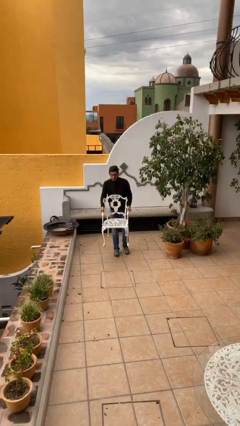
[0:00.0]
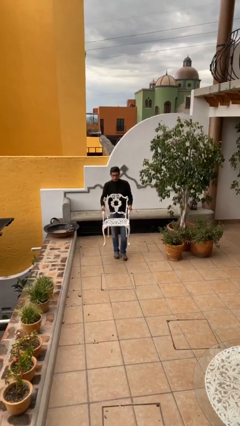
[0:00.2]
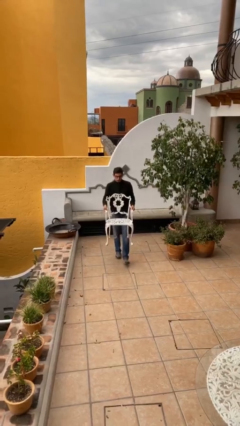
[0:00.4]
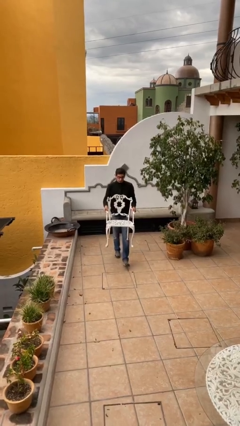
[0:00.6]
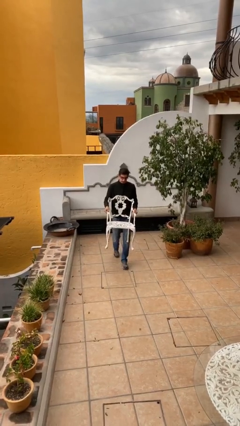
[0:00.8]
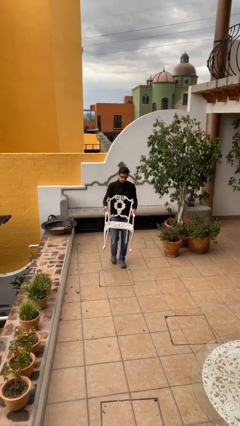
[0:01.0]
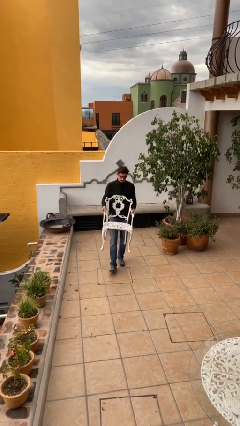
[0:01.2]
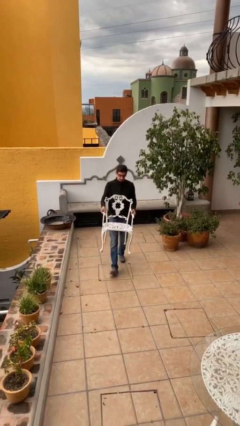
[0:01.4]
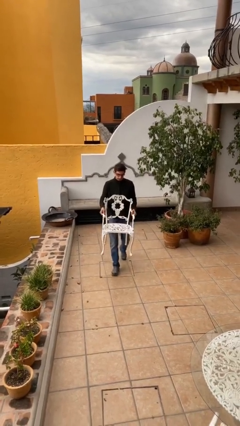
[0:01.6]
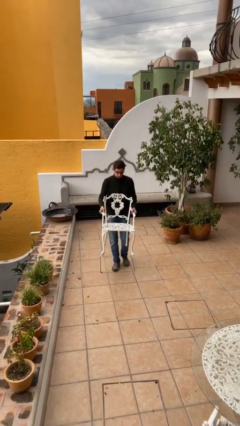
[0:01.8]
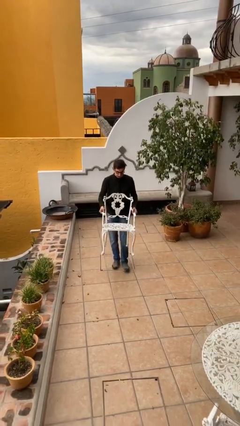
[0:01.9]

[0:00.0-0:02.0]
person carries heavy object

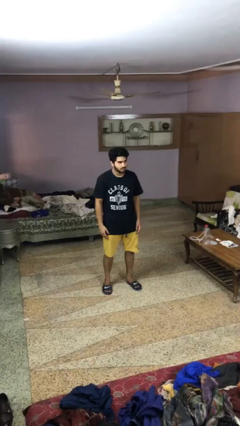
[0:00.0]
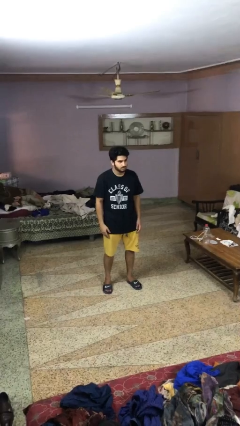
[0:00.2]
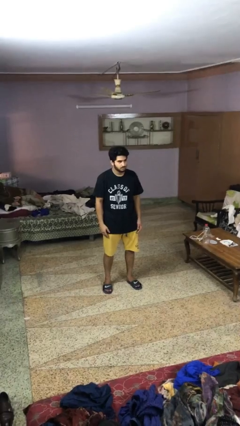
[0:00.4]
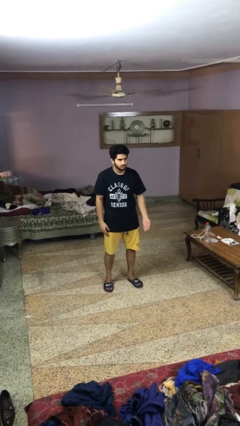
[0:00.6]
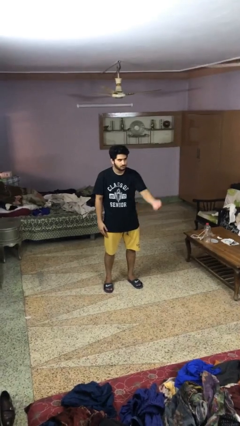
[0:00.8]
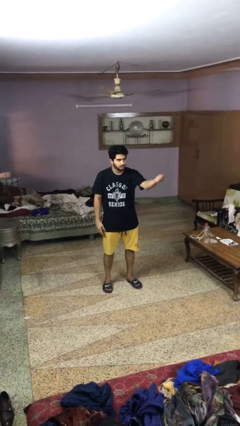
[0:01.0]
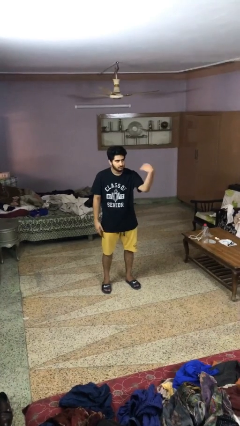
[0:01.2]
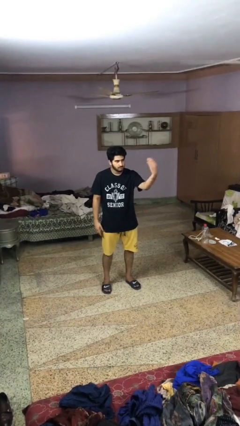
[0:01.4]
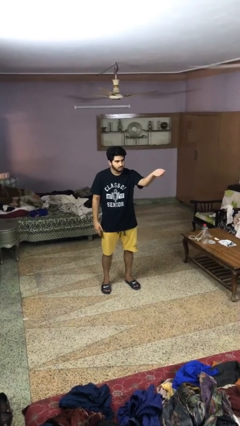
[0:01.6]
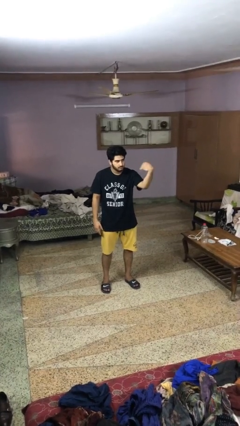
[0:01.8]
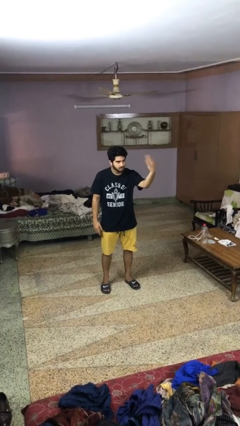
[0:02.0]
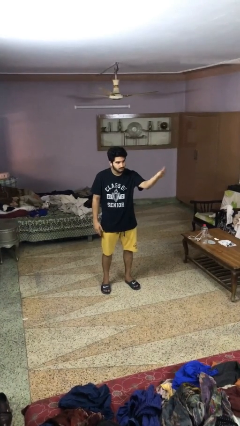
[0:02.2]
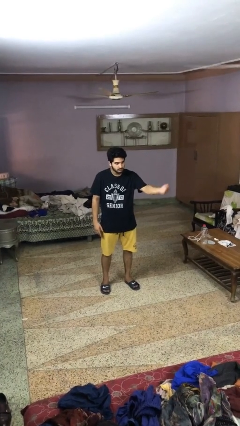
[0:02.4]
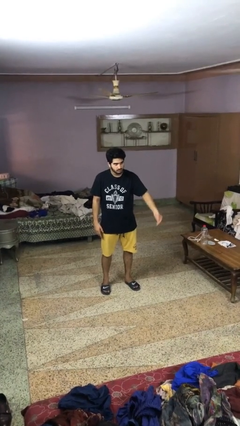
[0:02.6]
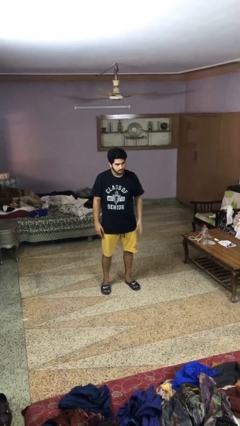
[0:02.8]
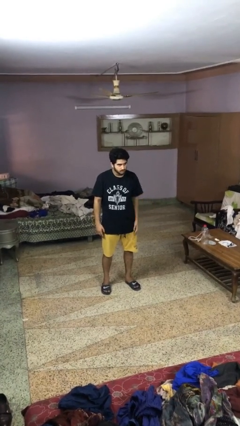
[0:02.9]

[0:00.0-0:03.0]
person gestures come here

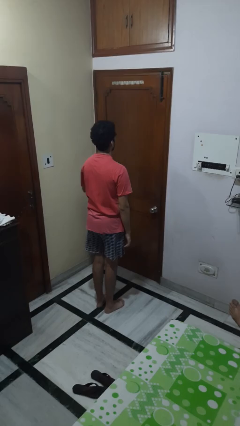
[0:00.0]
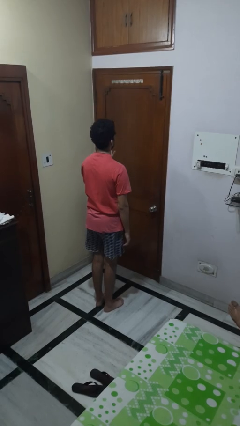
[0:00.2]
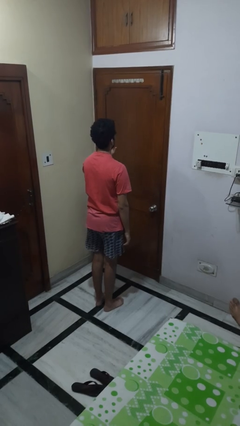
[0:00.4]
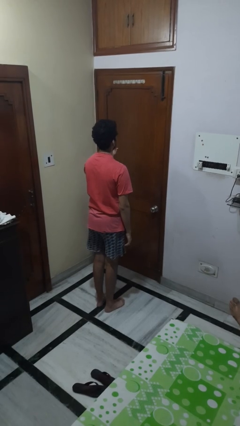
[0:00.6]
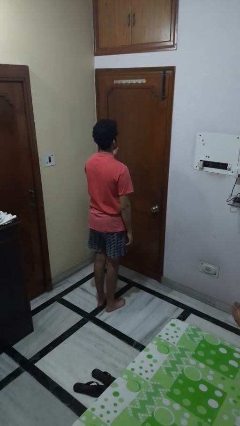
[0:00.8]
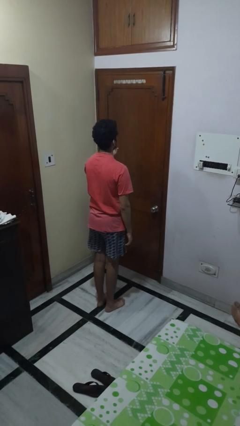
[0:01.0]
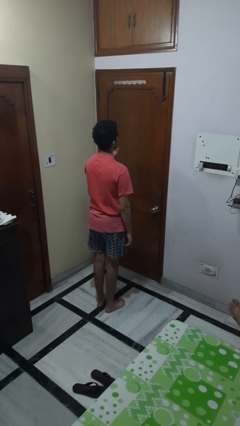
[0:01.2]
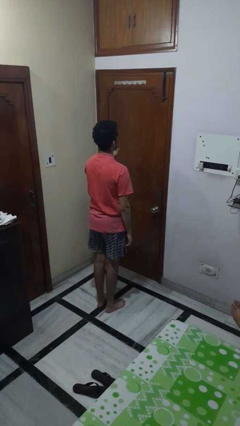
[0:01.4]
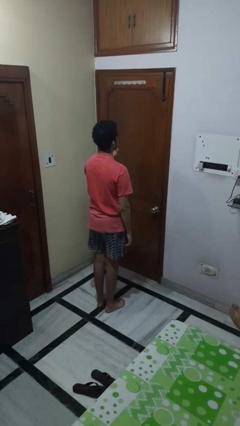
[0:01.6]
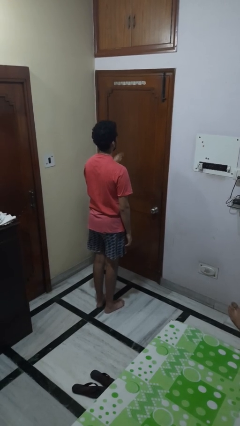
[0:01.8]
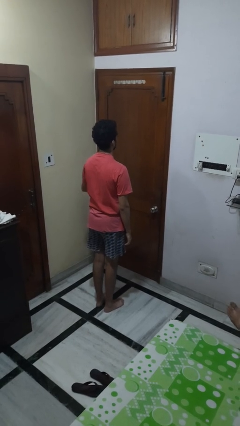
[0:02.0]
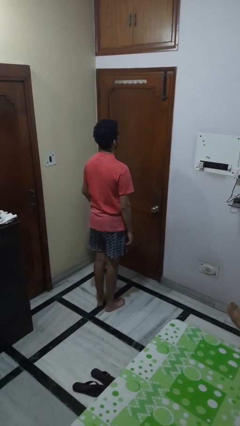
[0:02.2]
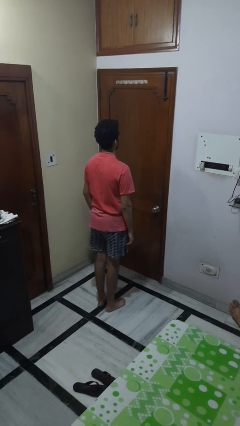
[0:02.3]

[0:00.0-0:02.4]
person gestures stop

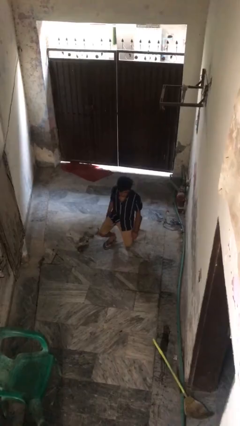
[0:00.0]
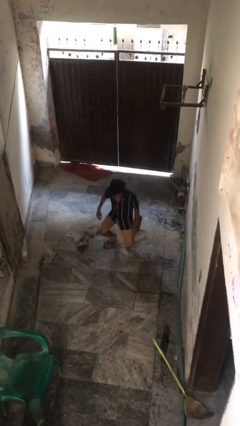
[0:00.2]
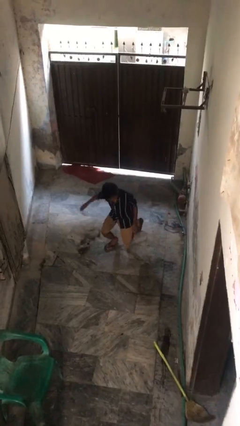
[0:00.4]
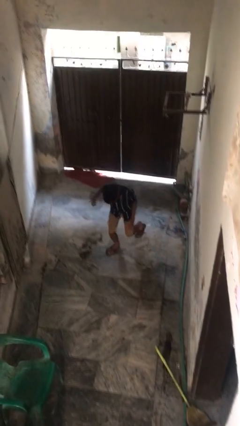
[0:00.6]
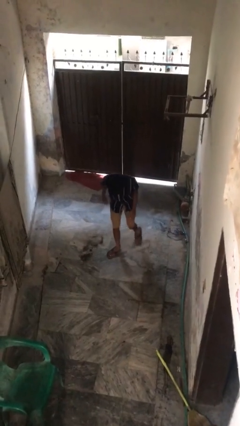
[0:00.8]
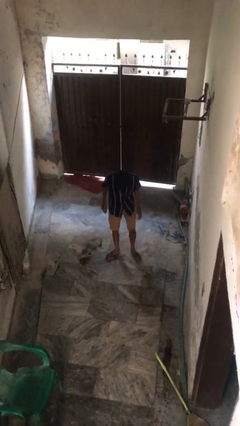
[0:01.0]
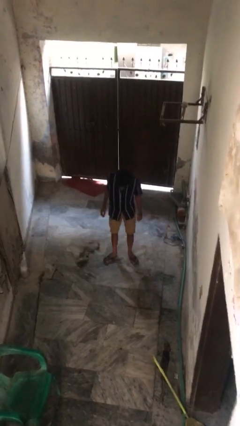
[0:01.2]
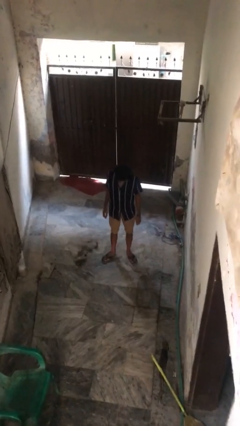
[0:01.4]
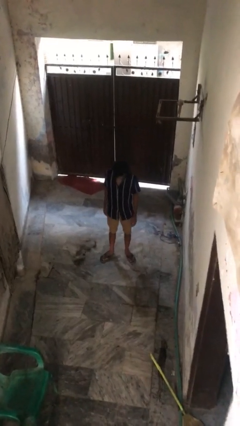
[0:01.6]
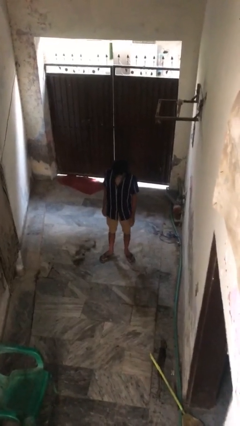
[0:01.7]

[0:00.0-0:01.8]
person stands up from floor

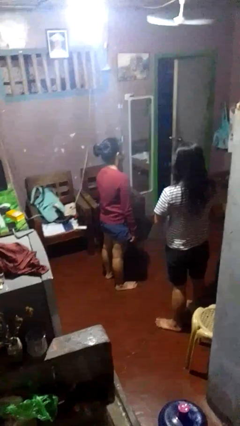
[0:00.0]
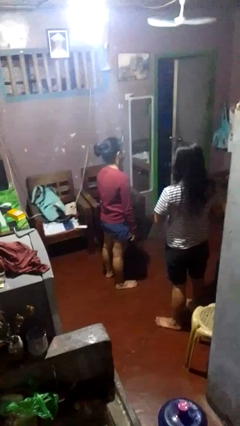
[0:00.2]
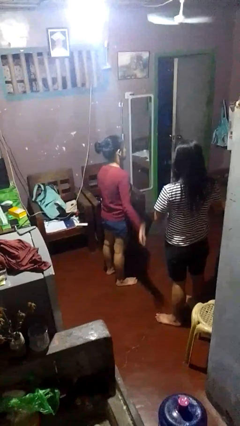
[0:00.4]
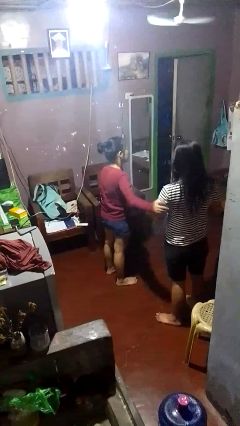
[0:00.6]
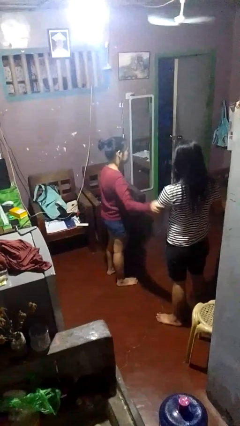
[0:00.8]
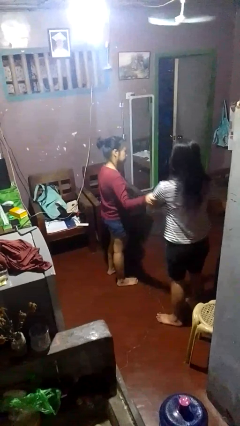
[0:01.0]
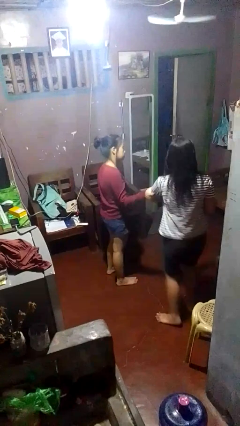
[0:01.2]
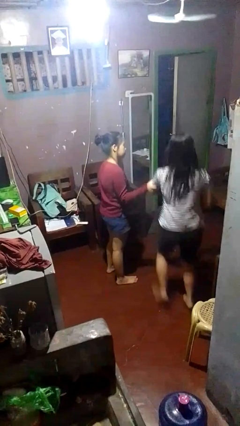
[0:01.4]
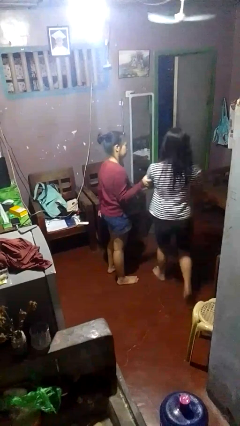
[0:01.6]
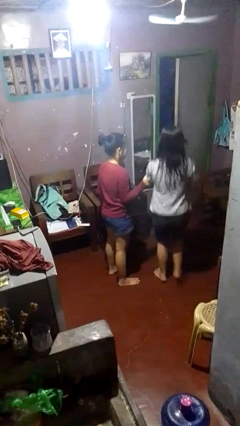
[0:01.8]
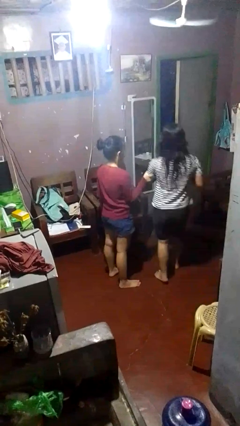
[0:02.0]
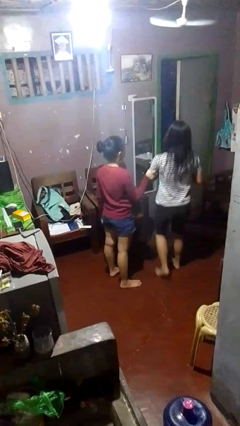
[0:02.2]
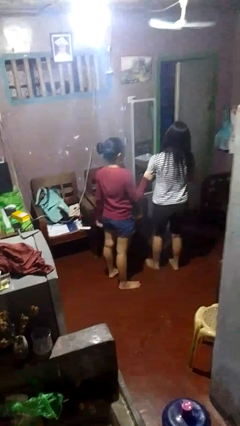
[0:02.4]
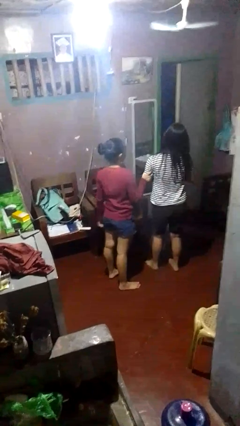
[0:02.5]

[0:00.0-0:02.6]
person grabs person by bicep

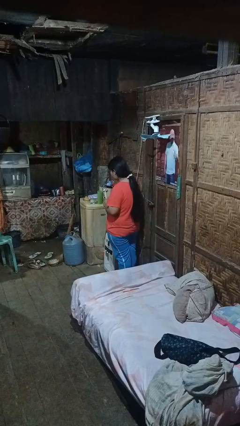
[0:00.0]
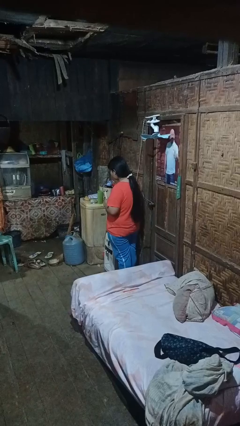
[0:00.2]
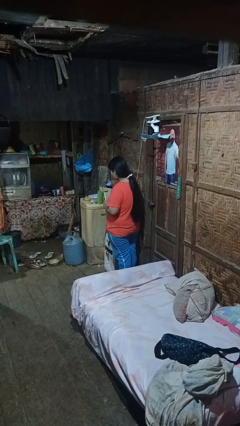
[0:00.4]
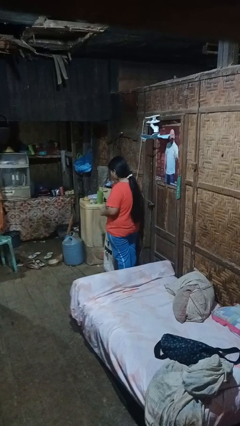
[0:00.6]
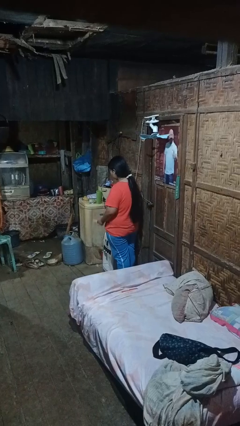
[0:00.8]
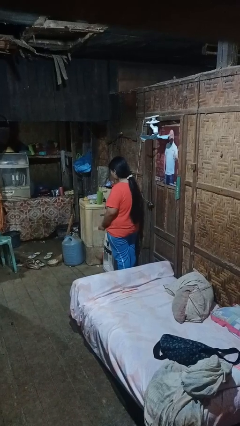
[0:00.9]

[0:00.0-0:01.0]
person extinguishes candle

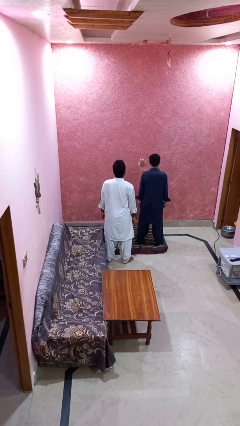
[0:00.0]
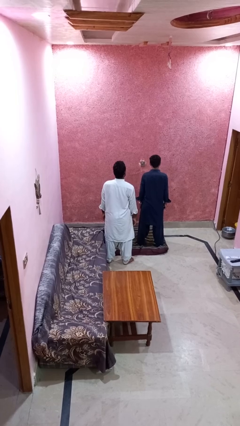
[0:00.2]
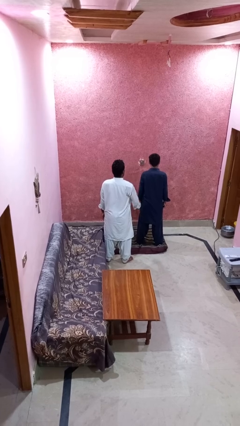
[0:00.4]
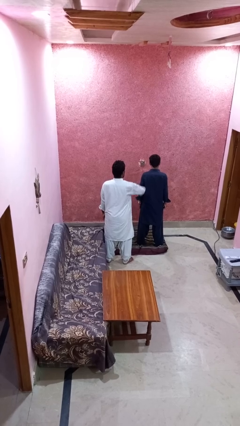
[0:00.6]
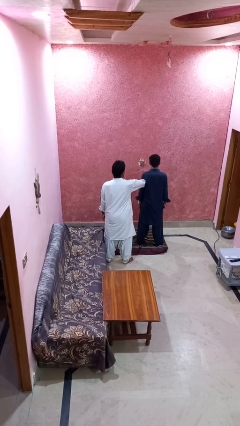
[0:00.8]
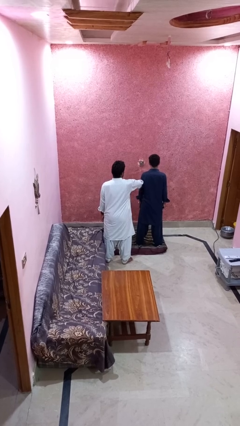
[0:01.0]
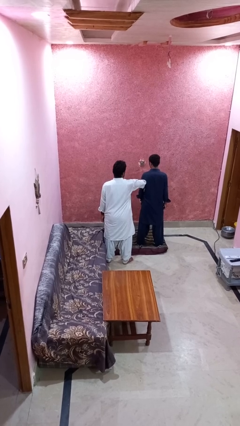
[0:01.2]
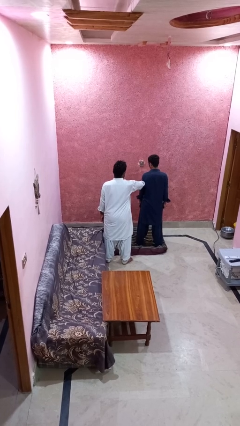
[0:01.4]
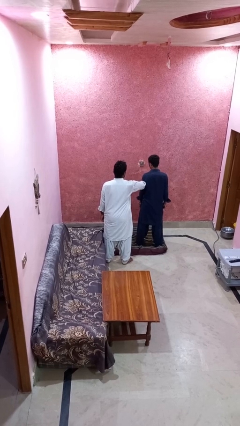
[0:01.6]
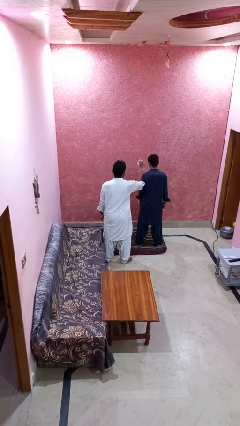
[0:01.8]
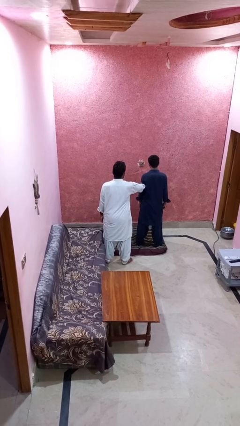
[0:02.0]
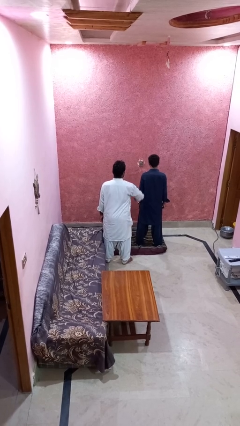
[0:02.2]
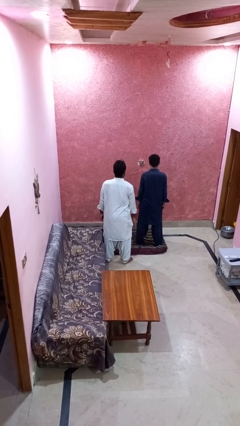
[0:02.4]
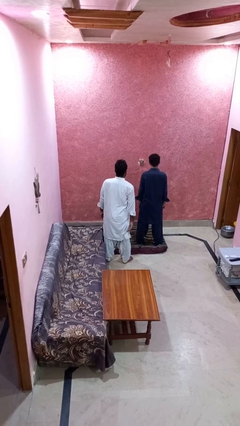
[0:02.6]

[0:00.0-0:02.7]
person grabs person by forearm

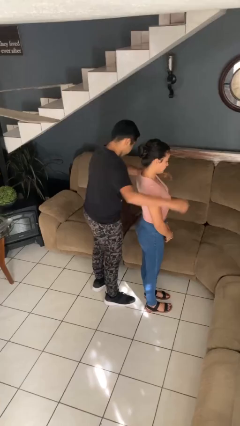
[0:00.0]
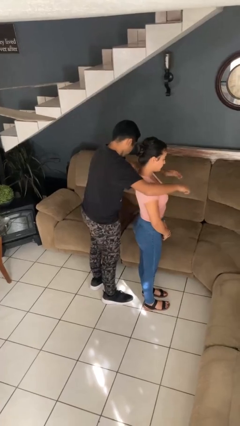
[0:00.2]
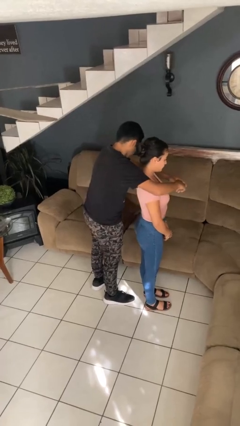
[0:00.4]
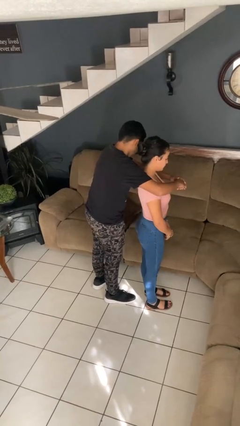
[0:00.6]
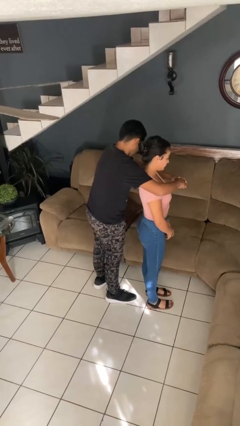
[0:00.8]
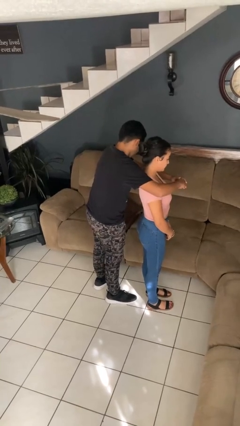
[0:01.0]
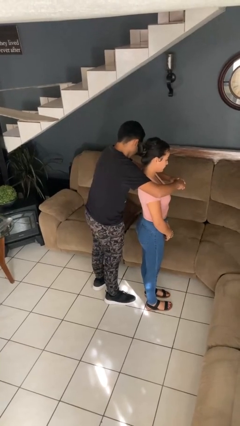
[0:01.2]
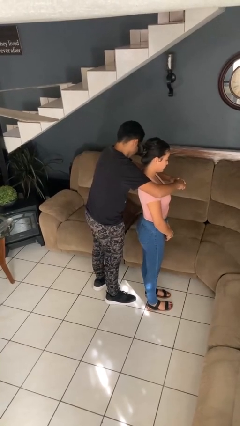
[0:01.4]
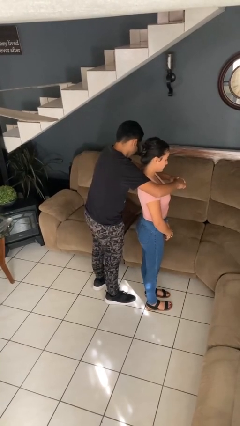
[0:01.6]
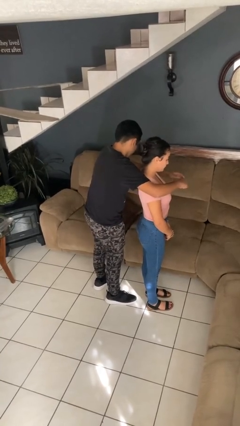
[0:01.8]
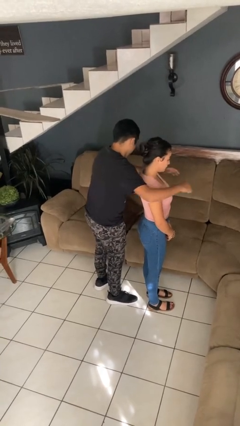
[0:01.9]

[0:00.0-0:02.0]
person hugs person from behind
